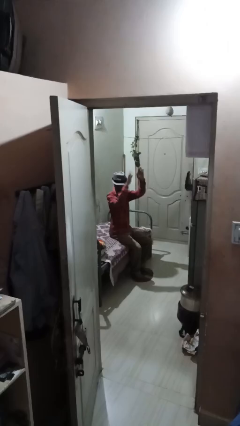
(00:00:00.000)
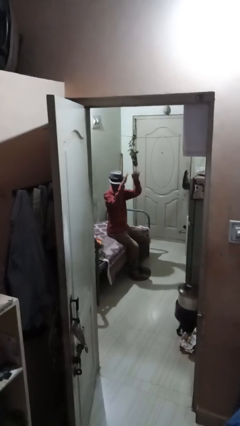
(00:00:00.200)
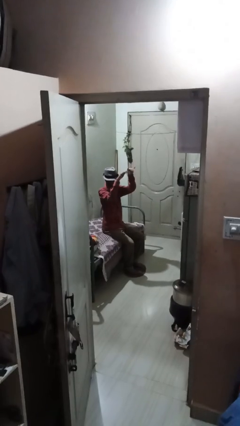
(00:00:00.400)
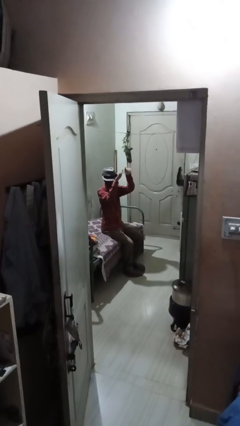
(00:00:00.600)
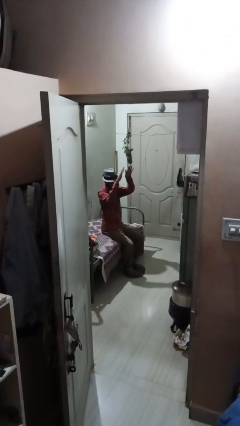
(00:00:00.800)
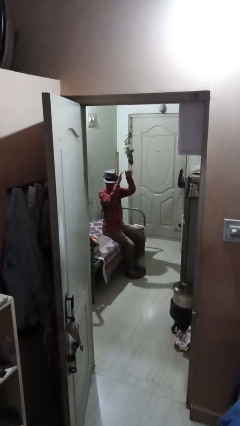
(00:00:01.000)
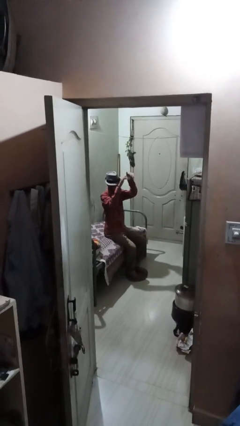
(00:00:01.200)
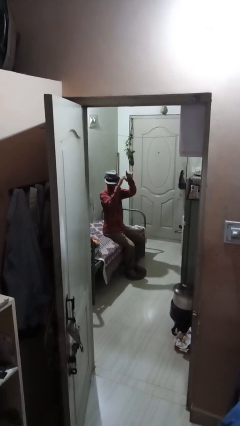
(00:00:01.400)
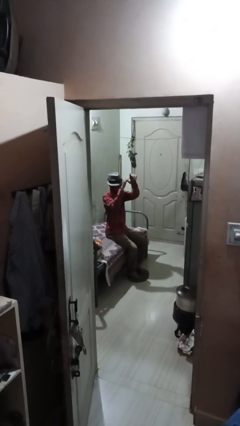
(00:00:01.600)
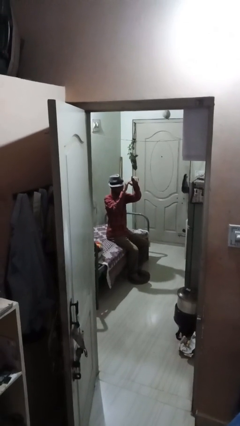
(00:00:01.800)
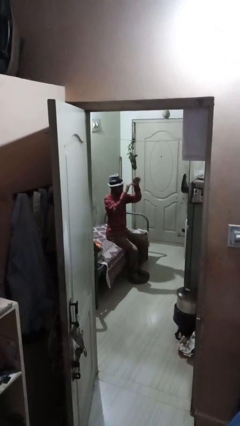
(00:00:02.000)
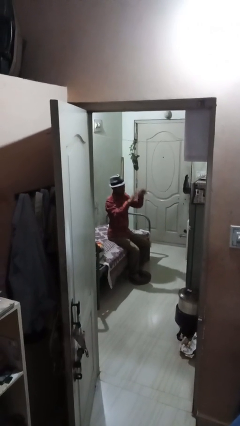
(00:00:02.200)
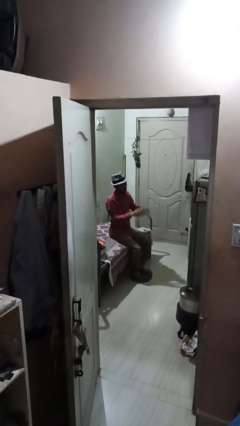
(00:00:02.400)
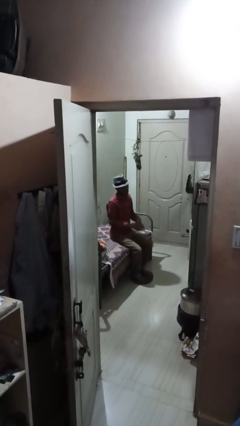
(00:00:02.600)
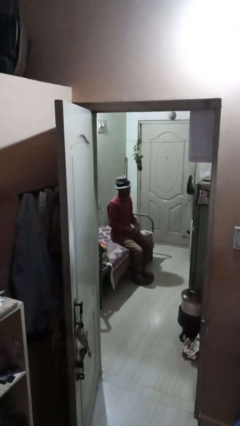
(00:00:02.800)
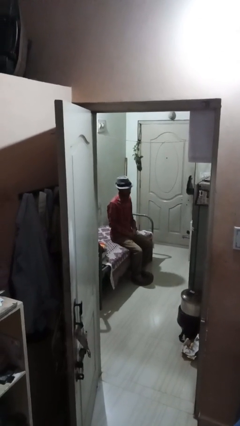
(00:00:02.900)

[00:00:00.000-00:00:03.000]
person gestures come here

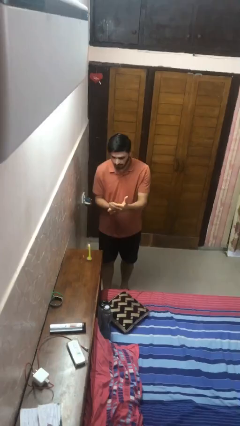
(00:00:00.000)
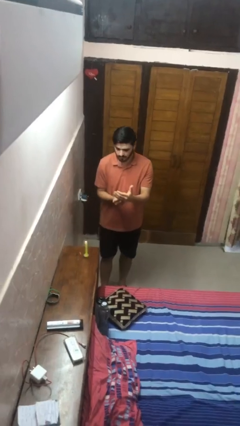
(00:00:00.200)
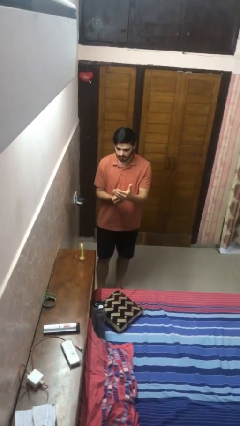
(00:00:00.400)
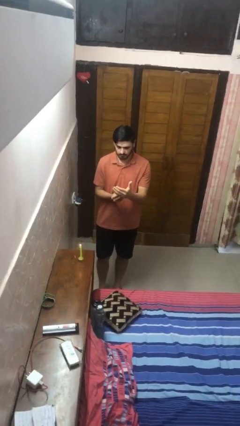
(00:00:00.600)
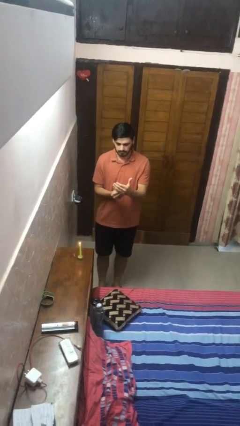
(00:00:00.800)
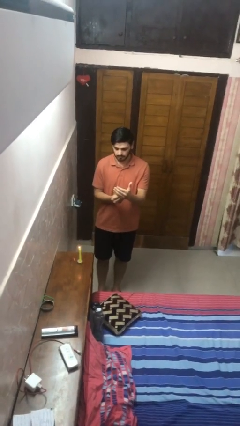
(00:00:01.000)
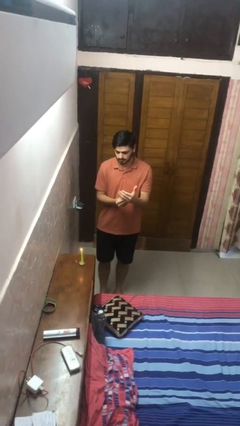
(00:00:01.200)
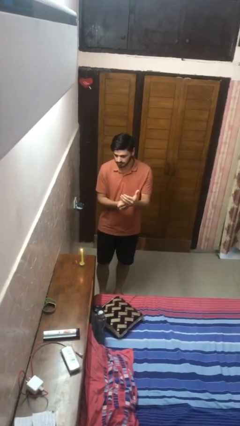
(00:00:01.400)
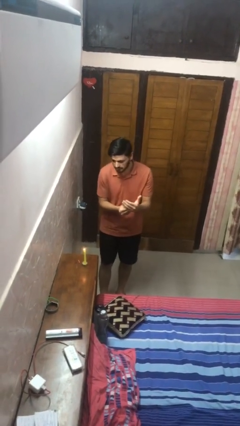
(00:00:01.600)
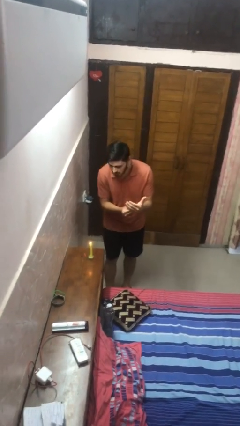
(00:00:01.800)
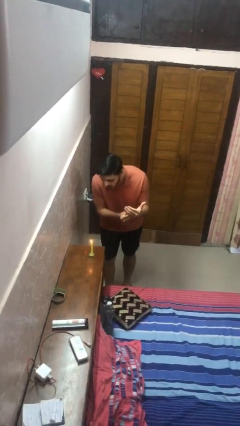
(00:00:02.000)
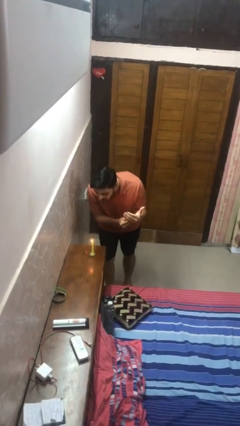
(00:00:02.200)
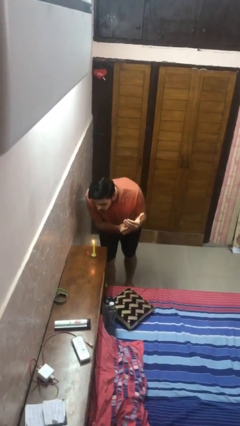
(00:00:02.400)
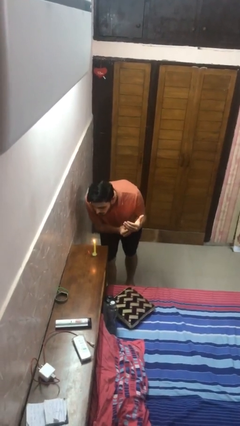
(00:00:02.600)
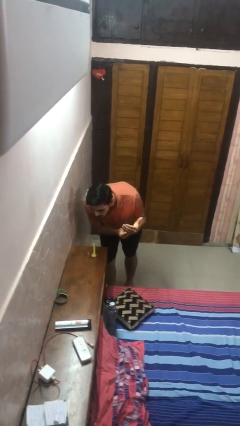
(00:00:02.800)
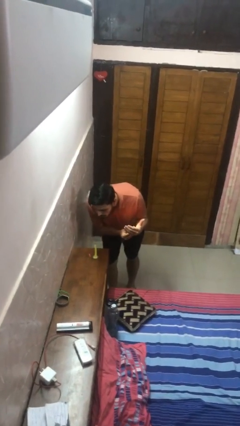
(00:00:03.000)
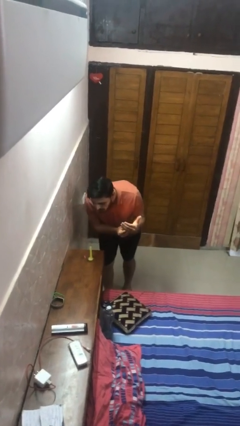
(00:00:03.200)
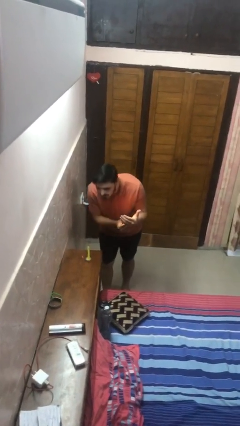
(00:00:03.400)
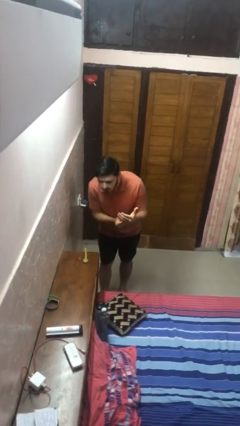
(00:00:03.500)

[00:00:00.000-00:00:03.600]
person extinguishes candle

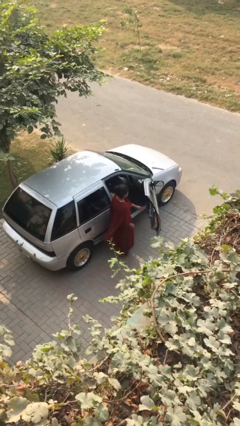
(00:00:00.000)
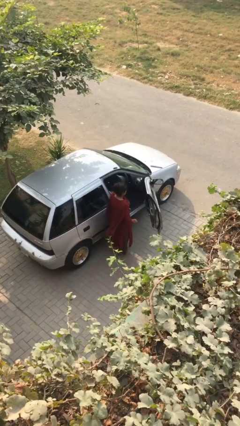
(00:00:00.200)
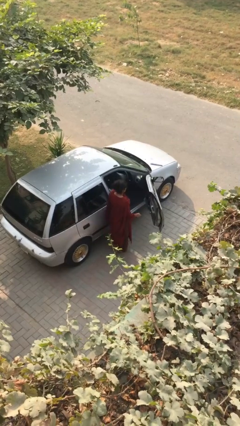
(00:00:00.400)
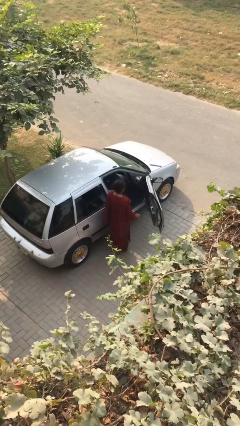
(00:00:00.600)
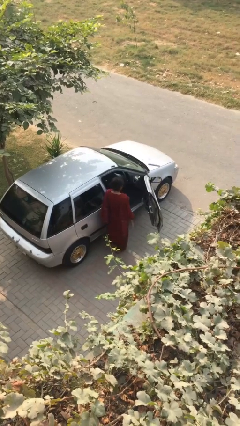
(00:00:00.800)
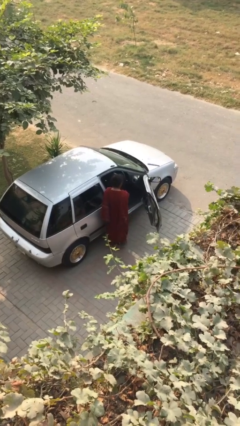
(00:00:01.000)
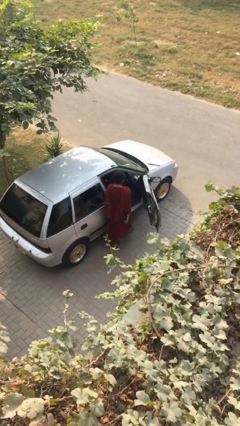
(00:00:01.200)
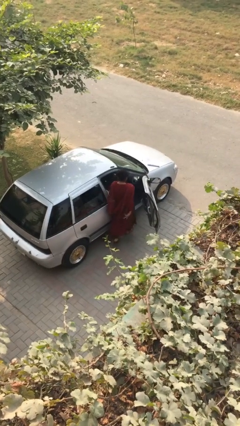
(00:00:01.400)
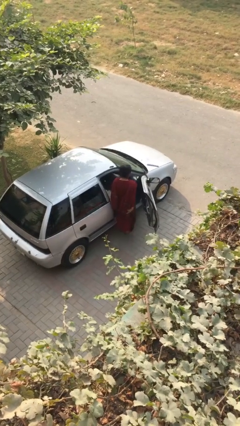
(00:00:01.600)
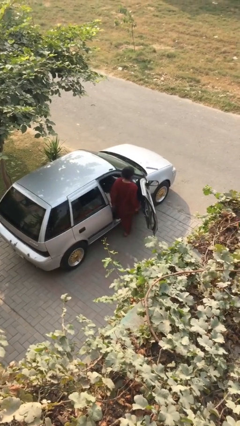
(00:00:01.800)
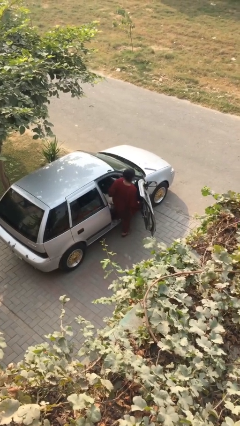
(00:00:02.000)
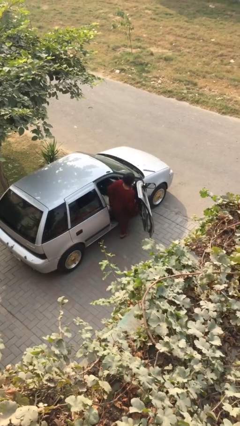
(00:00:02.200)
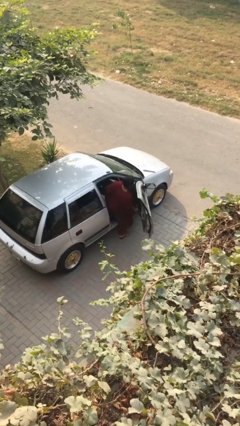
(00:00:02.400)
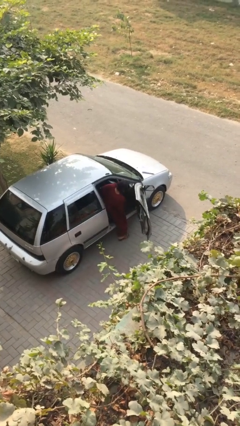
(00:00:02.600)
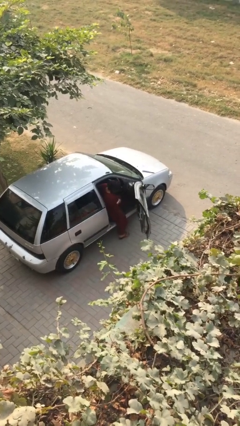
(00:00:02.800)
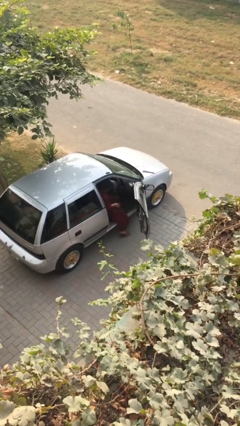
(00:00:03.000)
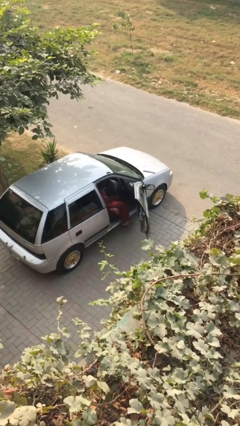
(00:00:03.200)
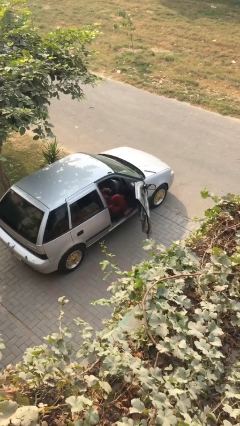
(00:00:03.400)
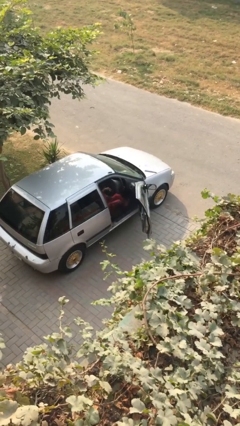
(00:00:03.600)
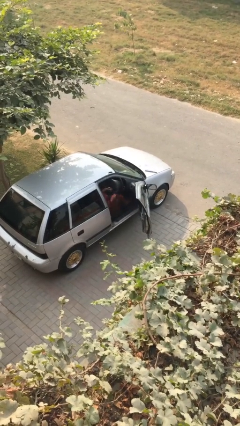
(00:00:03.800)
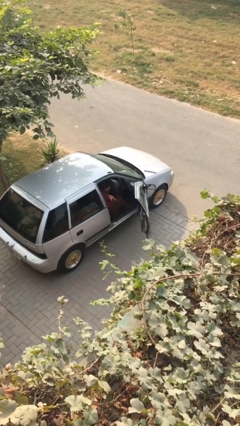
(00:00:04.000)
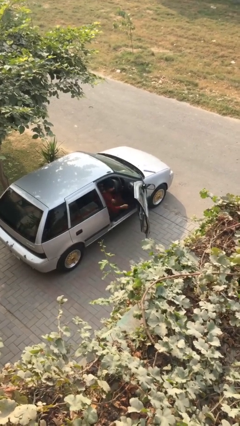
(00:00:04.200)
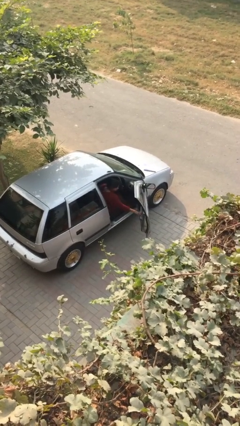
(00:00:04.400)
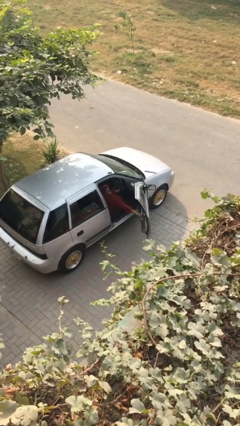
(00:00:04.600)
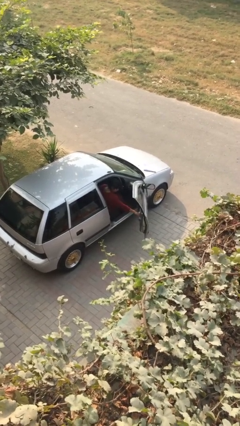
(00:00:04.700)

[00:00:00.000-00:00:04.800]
person enters car

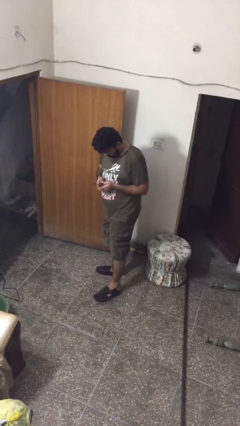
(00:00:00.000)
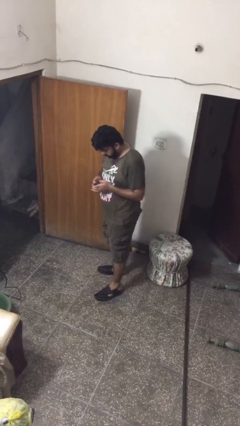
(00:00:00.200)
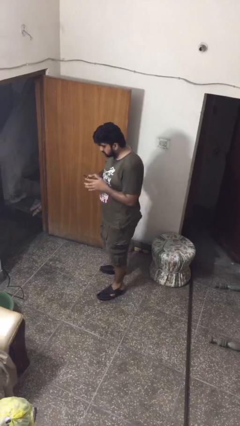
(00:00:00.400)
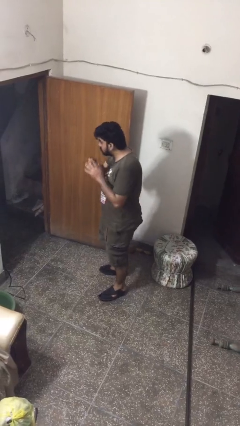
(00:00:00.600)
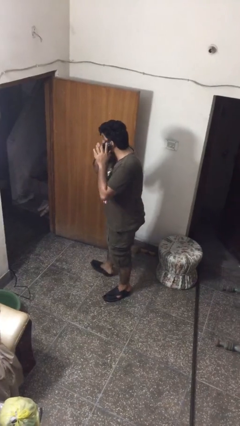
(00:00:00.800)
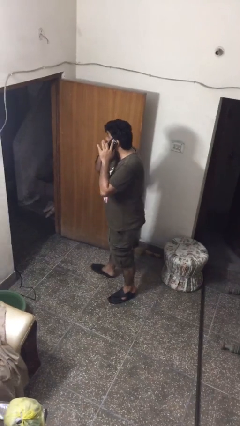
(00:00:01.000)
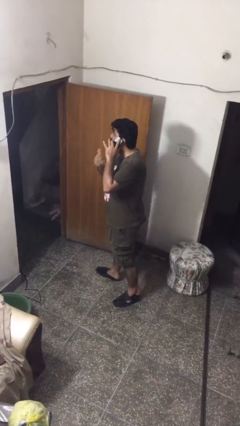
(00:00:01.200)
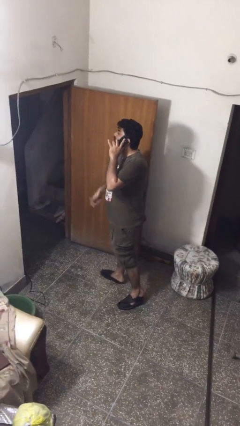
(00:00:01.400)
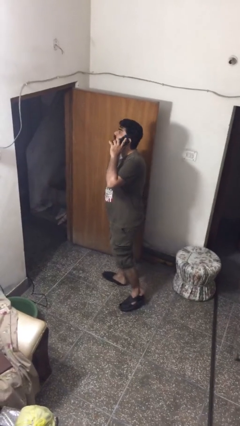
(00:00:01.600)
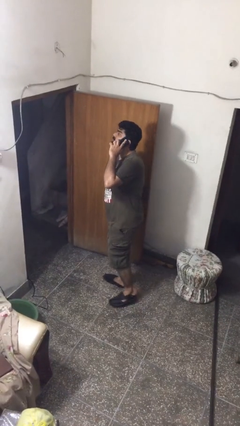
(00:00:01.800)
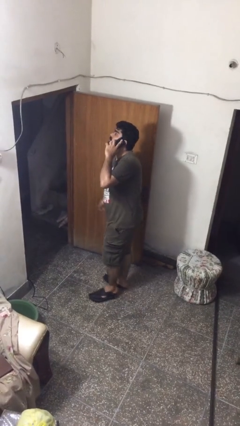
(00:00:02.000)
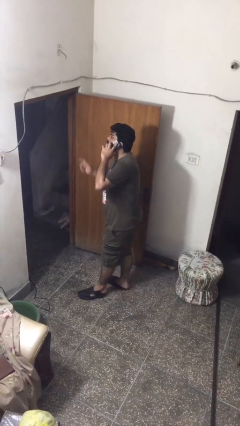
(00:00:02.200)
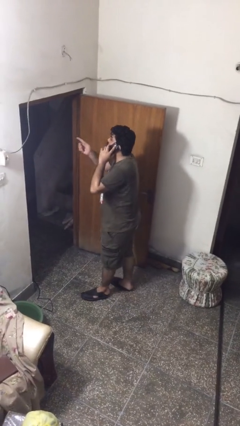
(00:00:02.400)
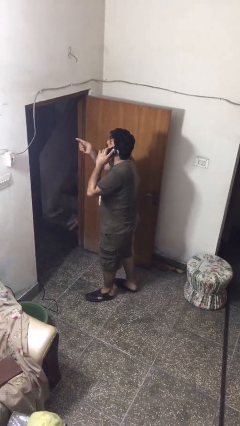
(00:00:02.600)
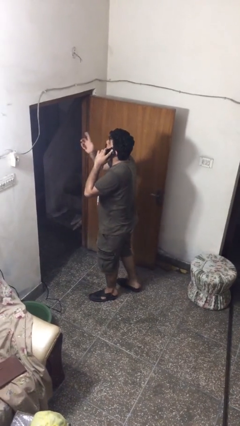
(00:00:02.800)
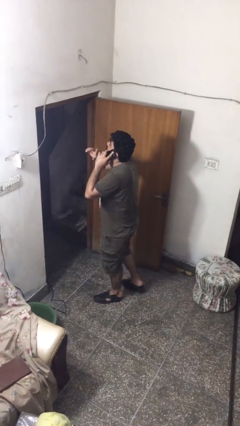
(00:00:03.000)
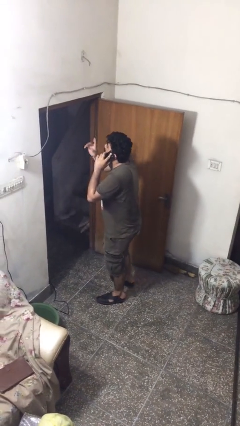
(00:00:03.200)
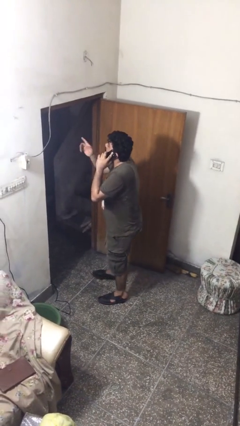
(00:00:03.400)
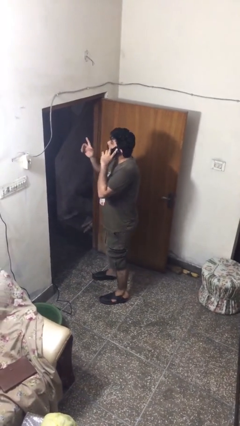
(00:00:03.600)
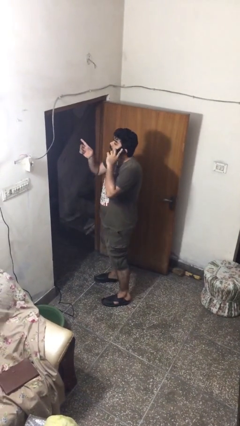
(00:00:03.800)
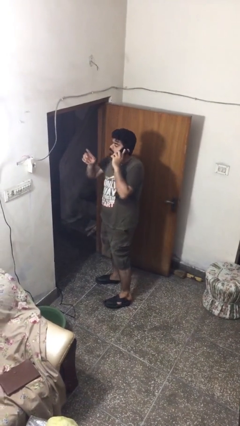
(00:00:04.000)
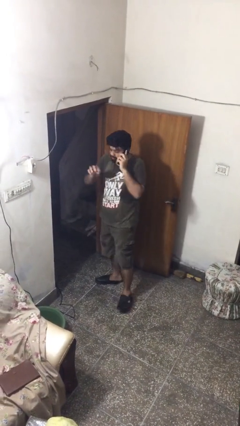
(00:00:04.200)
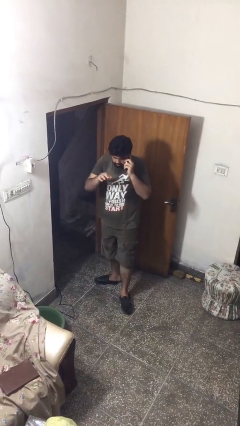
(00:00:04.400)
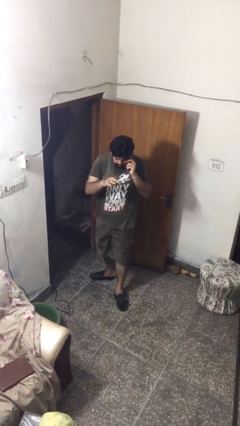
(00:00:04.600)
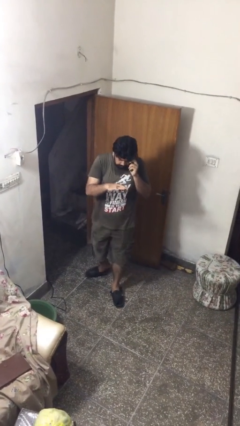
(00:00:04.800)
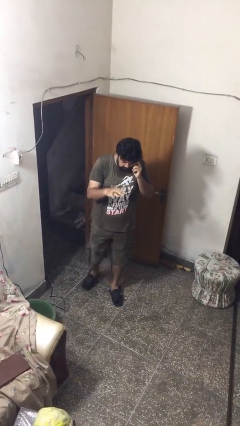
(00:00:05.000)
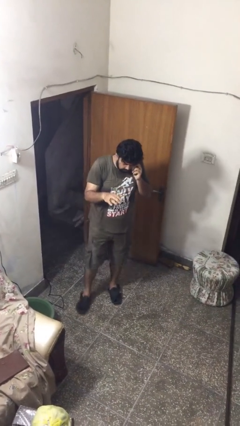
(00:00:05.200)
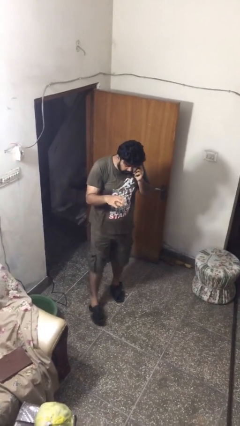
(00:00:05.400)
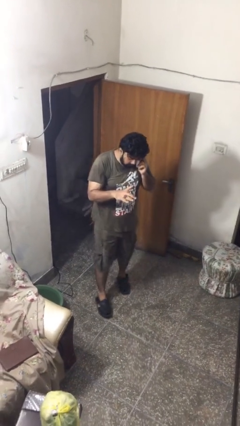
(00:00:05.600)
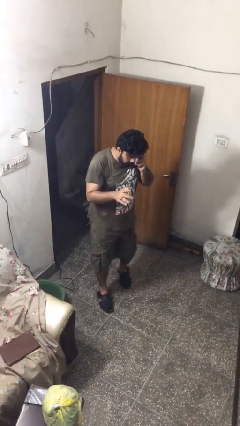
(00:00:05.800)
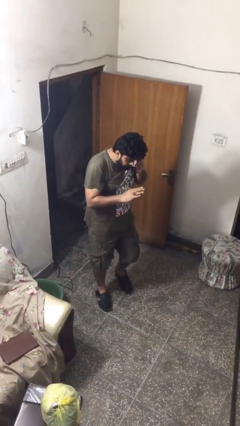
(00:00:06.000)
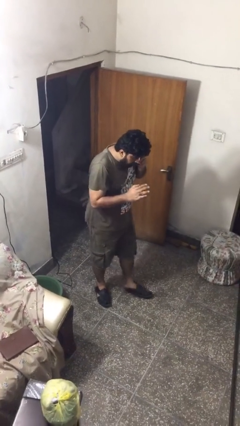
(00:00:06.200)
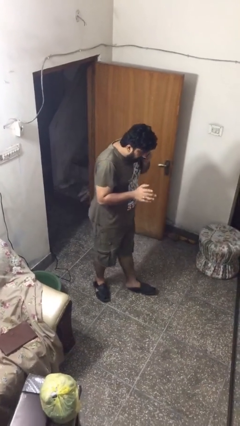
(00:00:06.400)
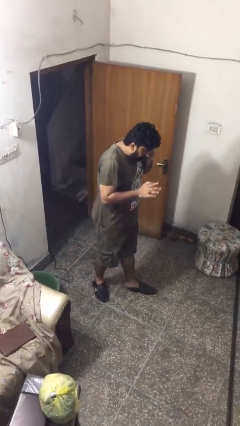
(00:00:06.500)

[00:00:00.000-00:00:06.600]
person talks on phone
